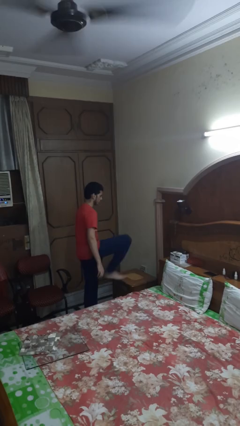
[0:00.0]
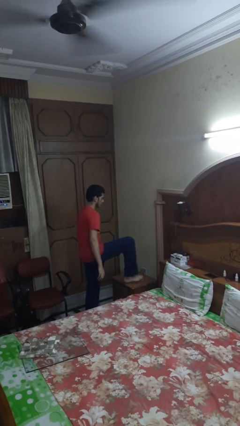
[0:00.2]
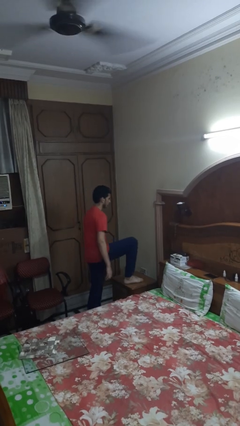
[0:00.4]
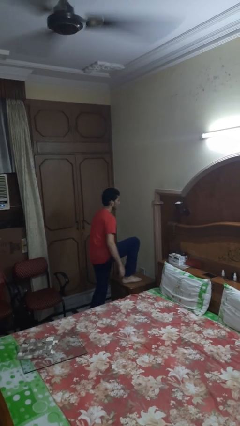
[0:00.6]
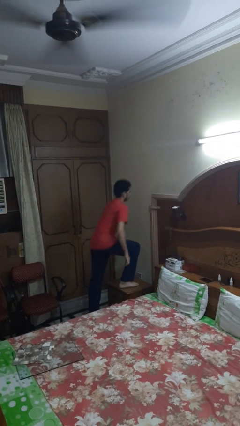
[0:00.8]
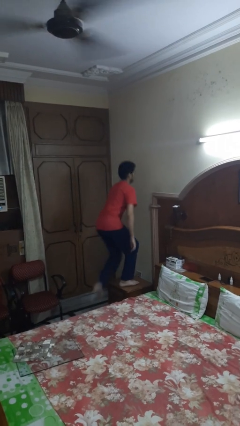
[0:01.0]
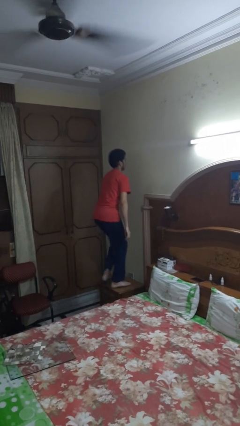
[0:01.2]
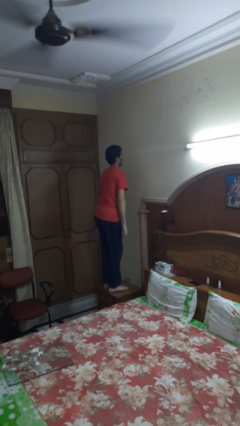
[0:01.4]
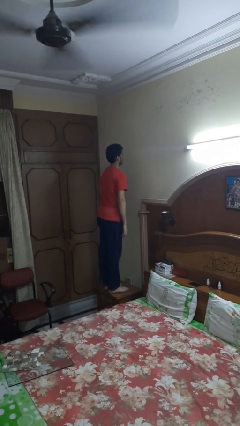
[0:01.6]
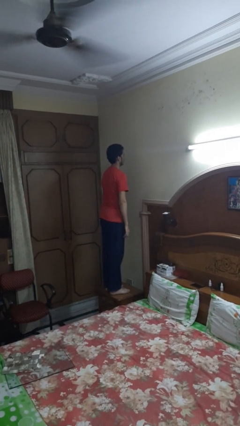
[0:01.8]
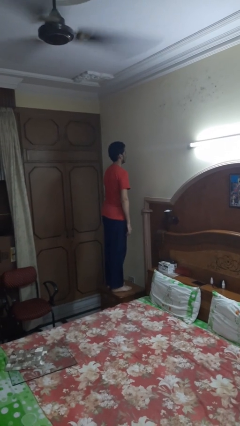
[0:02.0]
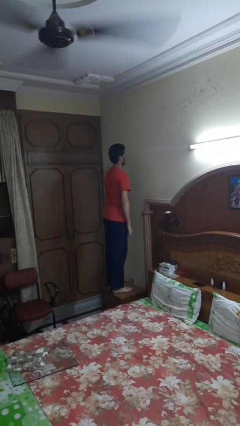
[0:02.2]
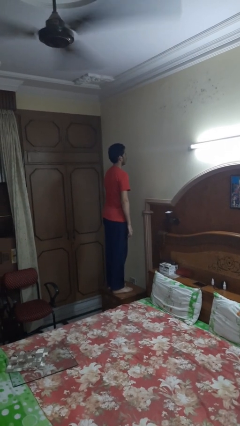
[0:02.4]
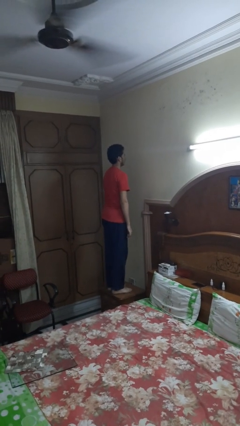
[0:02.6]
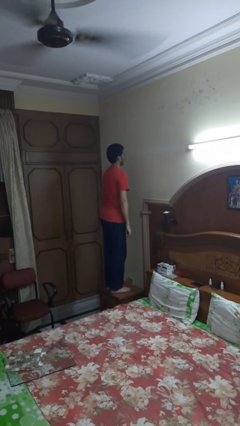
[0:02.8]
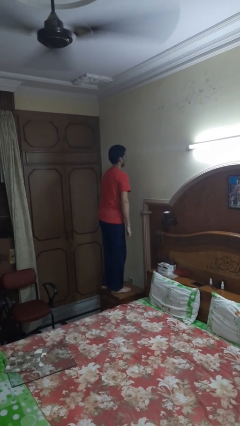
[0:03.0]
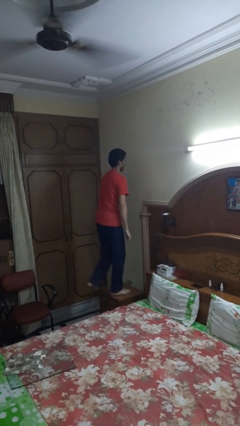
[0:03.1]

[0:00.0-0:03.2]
person climbs on table

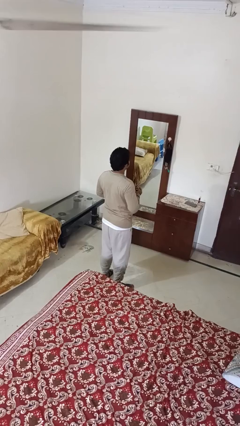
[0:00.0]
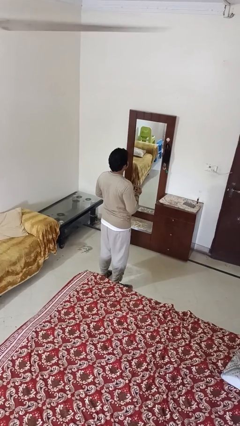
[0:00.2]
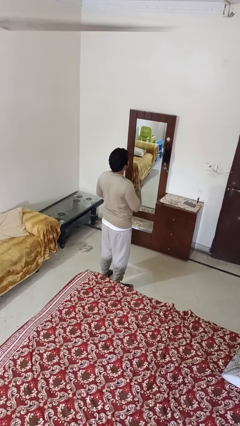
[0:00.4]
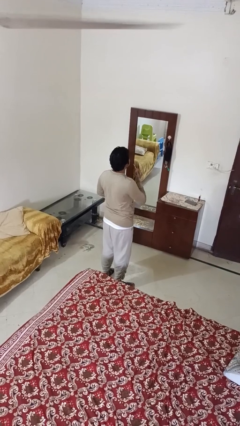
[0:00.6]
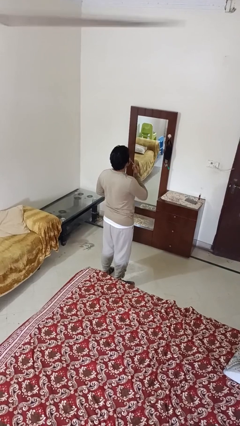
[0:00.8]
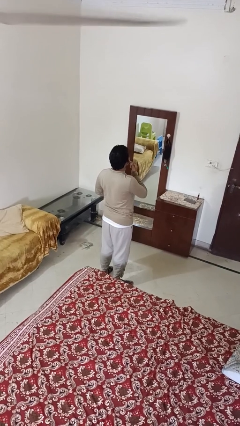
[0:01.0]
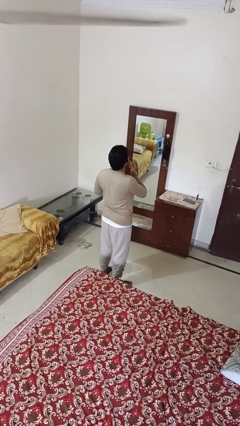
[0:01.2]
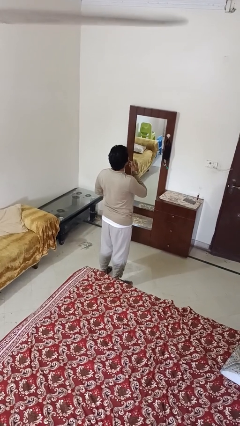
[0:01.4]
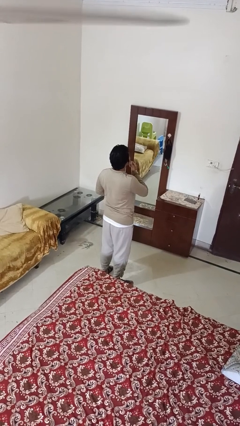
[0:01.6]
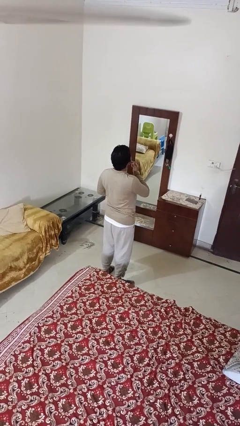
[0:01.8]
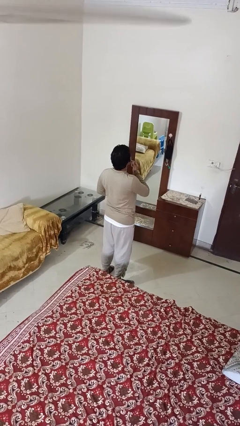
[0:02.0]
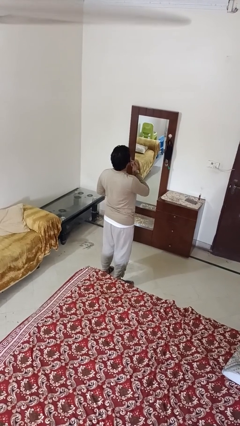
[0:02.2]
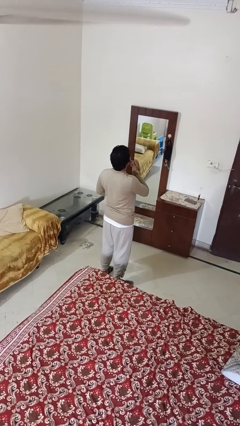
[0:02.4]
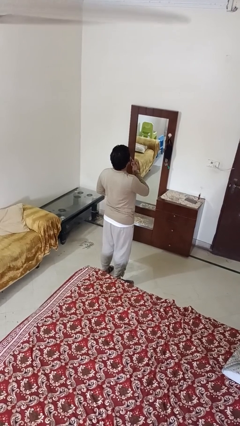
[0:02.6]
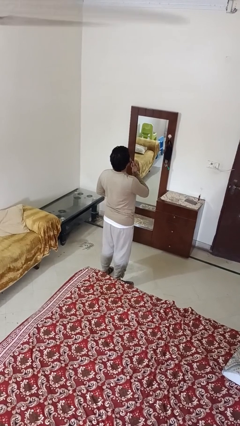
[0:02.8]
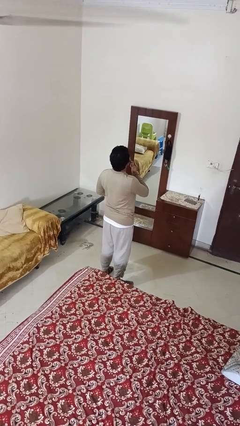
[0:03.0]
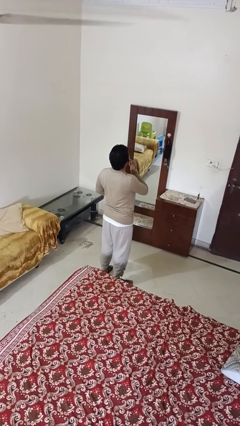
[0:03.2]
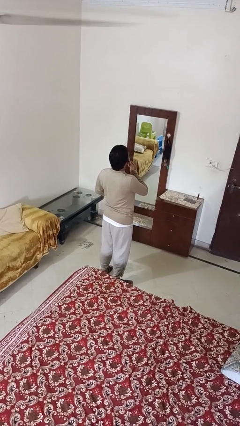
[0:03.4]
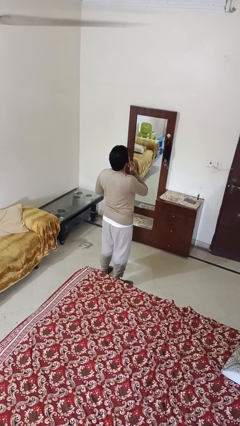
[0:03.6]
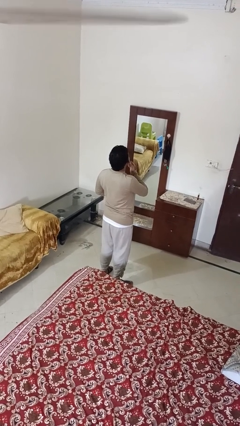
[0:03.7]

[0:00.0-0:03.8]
person applies lip makeup

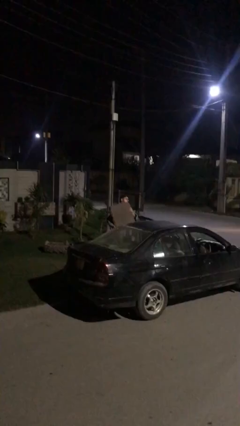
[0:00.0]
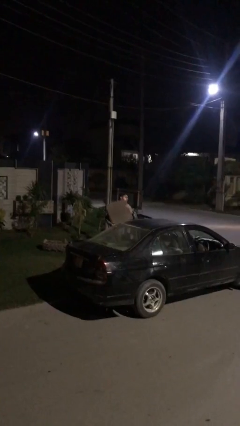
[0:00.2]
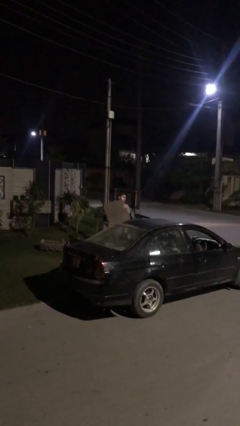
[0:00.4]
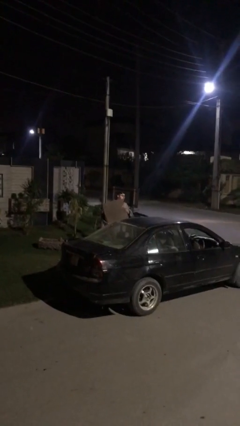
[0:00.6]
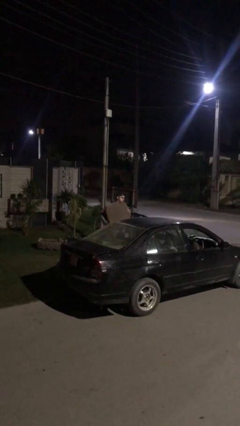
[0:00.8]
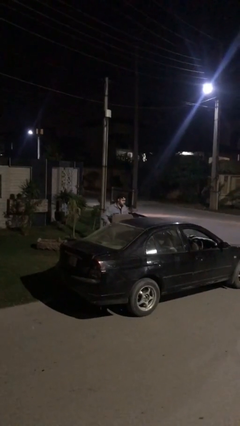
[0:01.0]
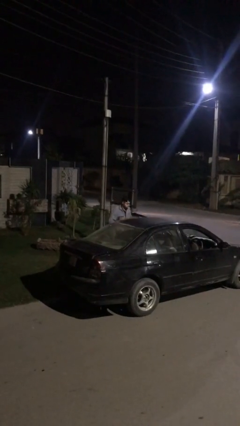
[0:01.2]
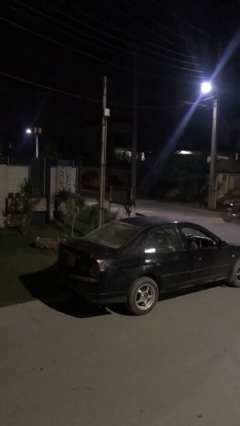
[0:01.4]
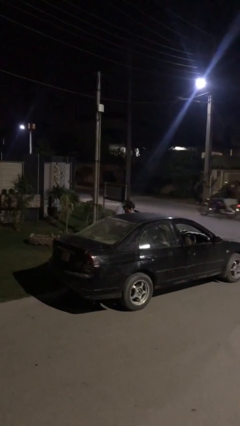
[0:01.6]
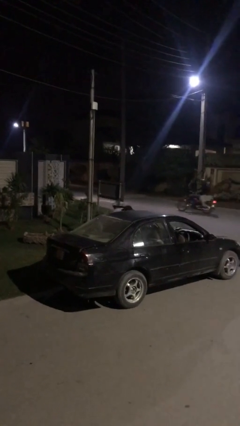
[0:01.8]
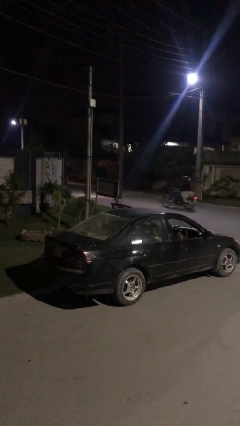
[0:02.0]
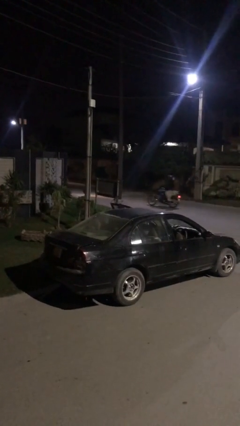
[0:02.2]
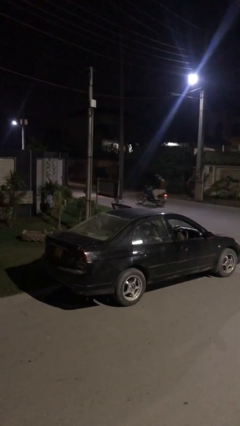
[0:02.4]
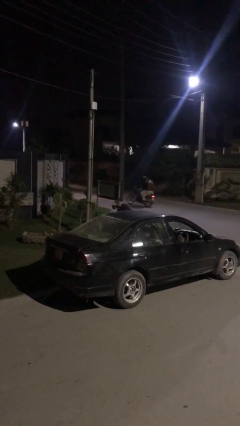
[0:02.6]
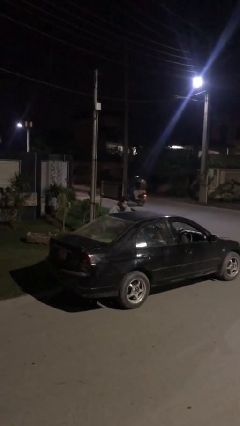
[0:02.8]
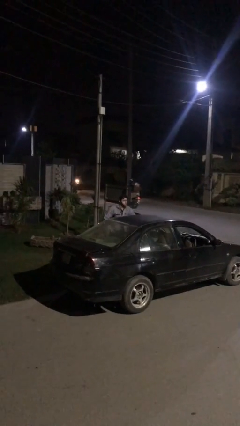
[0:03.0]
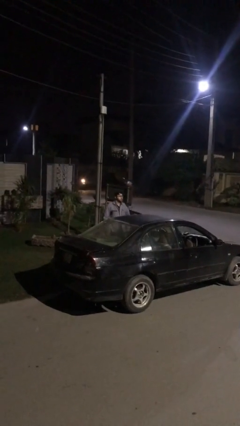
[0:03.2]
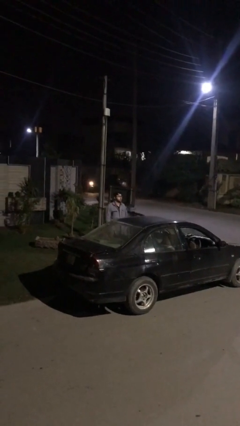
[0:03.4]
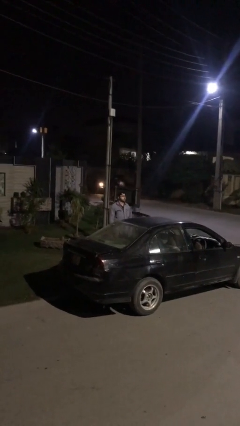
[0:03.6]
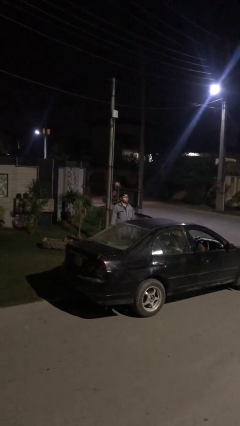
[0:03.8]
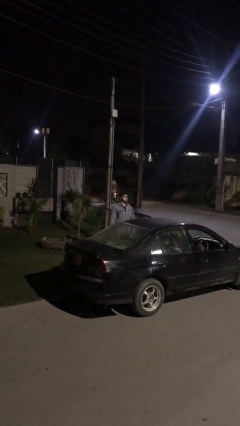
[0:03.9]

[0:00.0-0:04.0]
person loads car

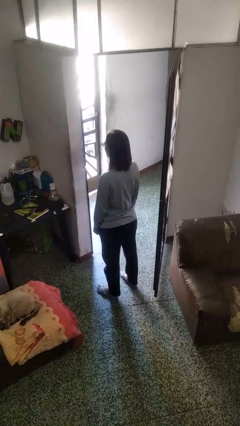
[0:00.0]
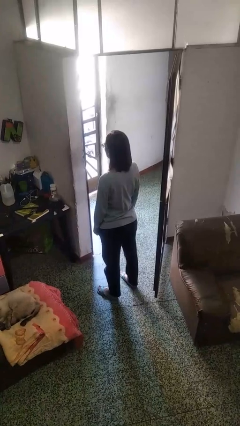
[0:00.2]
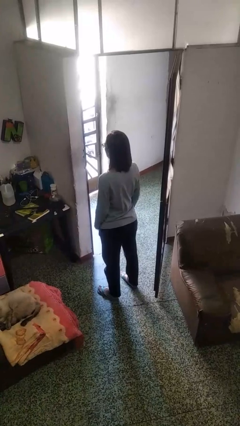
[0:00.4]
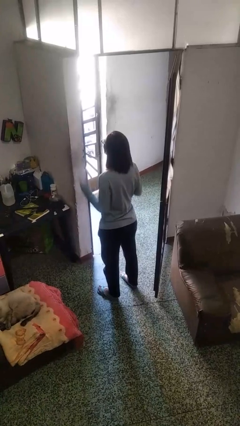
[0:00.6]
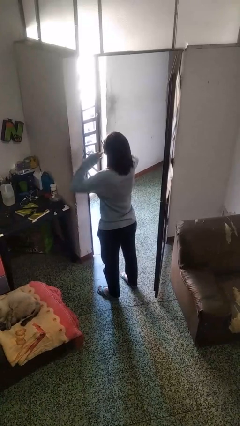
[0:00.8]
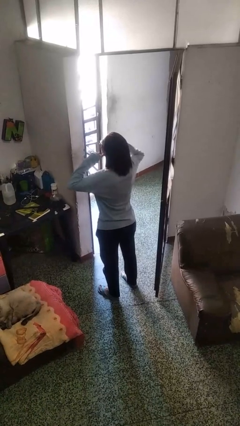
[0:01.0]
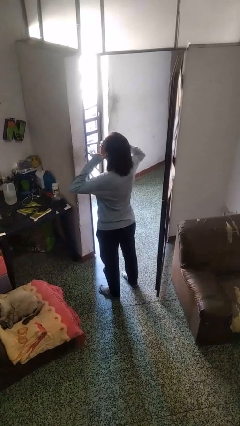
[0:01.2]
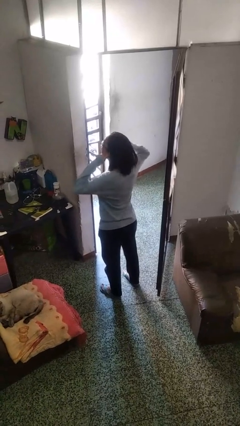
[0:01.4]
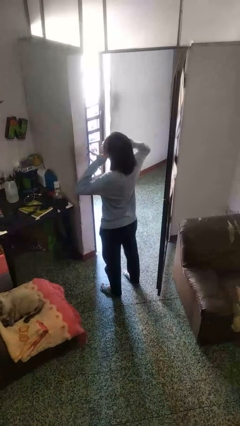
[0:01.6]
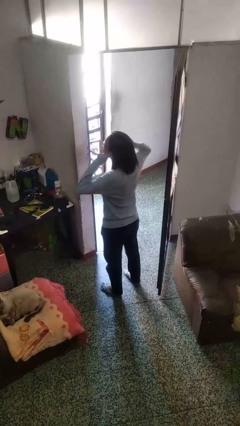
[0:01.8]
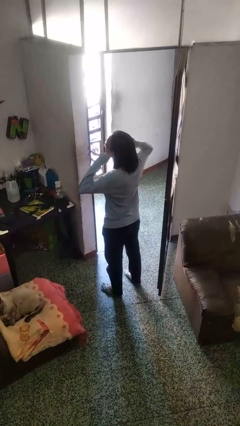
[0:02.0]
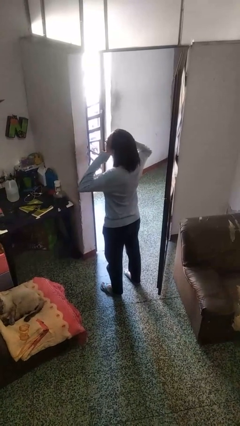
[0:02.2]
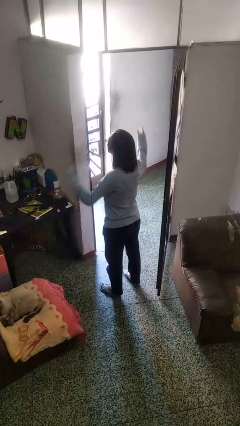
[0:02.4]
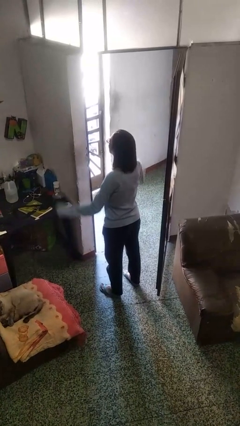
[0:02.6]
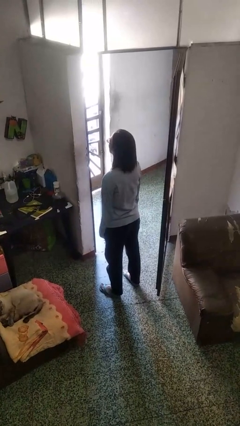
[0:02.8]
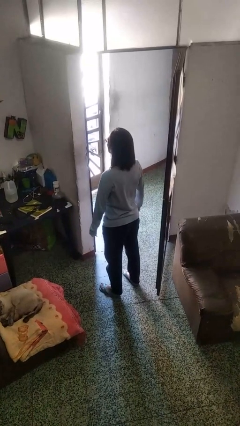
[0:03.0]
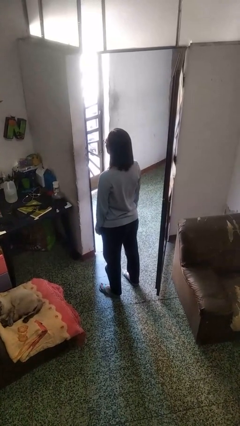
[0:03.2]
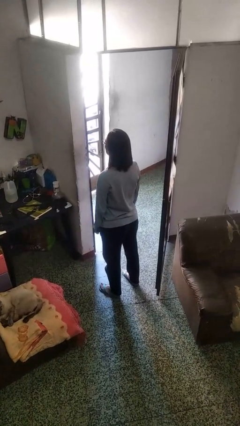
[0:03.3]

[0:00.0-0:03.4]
person puts fingers in ear

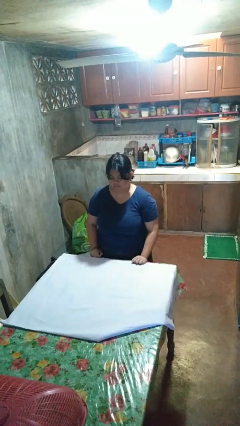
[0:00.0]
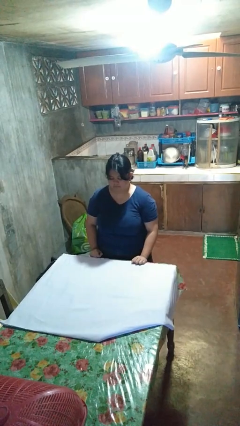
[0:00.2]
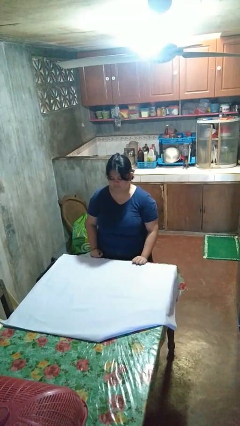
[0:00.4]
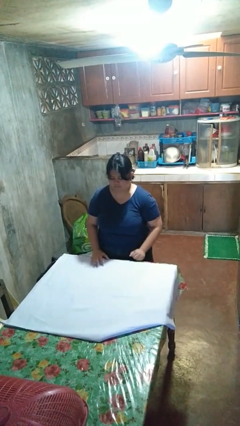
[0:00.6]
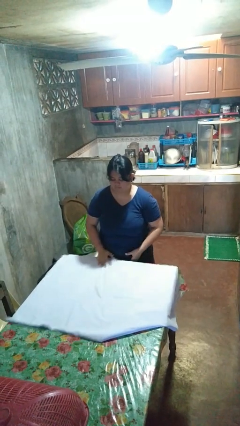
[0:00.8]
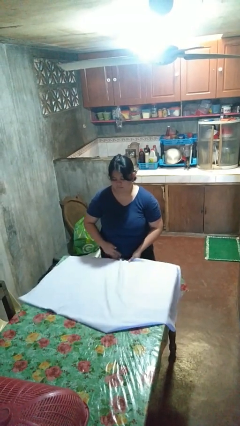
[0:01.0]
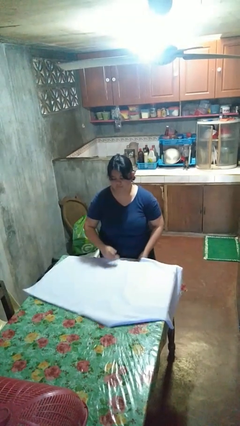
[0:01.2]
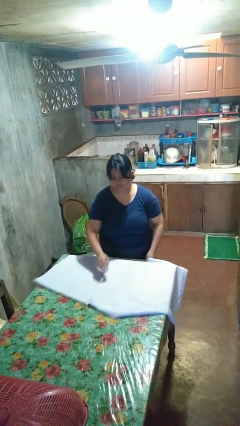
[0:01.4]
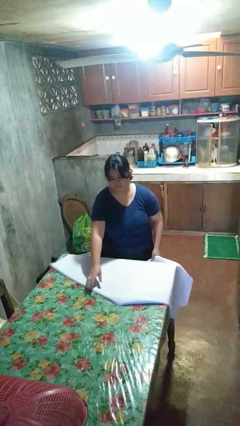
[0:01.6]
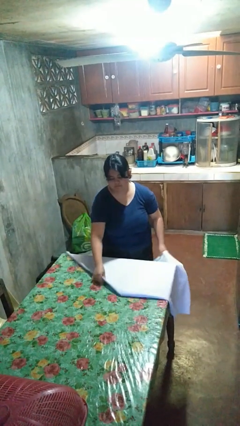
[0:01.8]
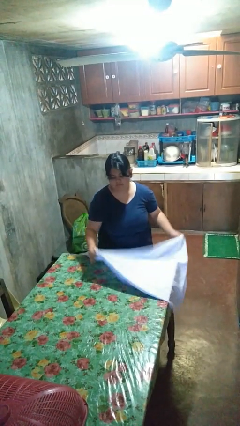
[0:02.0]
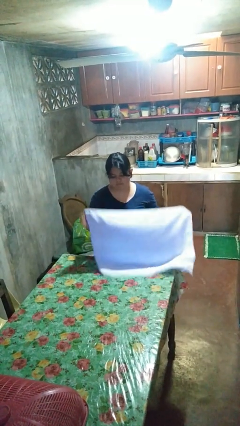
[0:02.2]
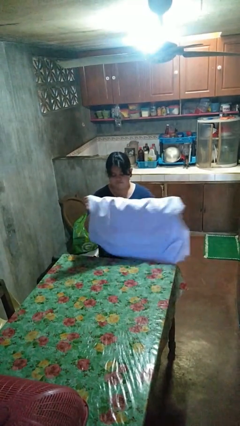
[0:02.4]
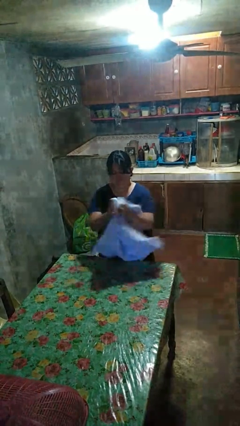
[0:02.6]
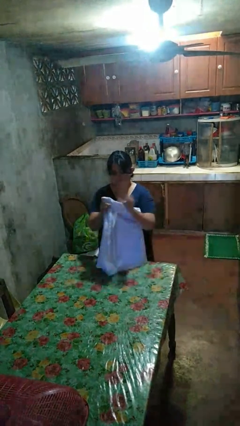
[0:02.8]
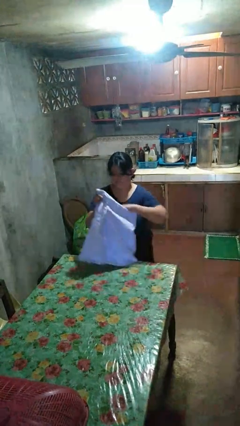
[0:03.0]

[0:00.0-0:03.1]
person folds tablecloth

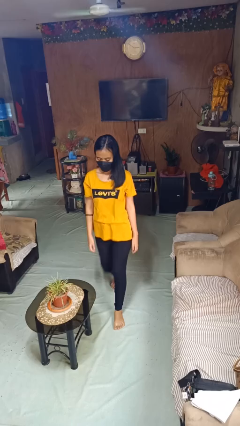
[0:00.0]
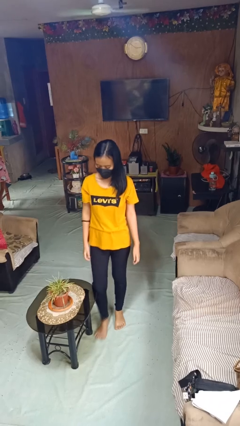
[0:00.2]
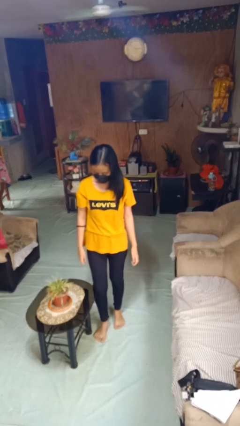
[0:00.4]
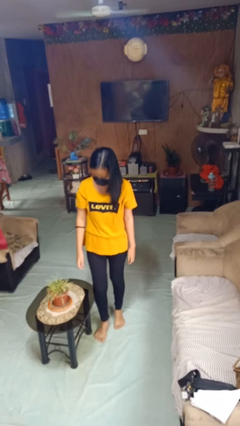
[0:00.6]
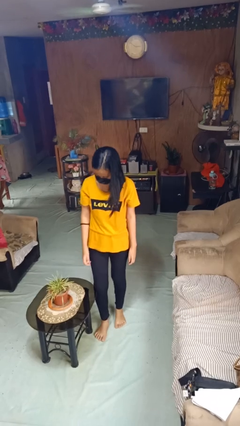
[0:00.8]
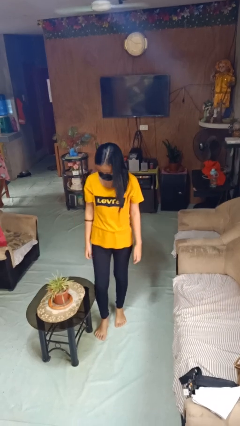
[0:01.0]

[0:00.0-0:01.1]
person bumps into table
